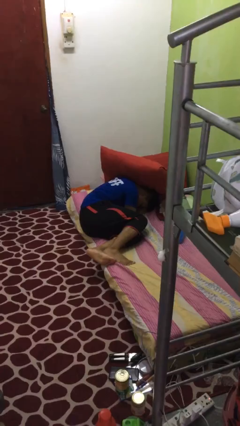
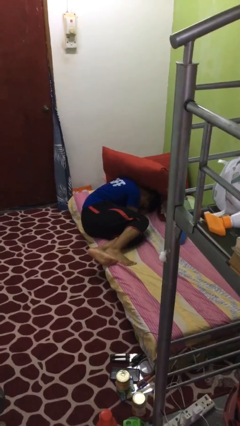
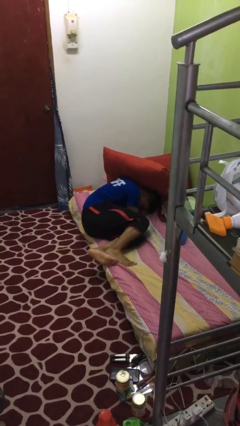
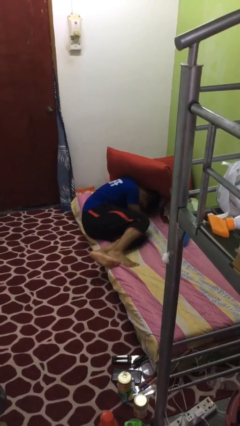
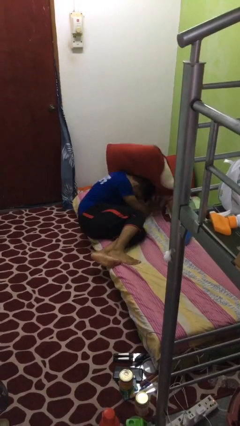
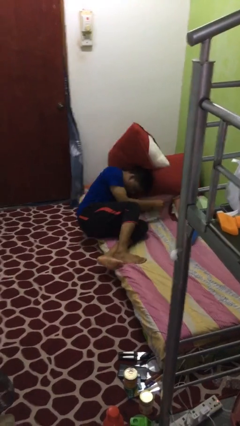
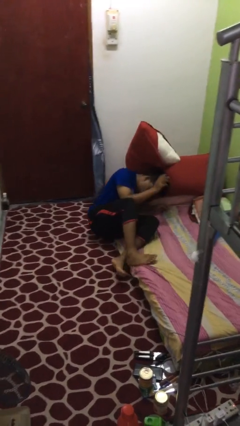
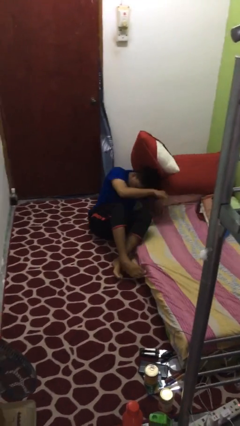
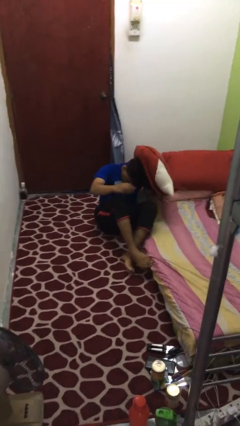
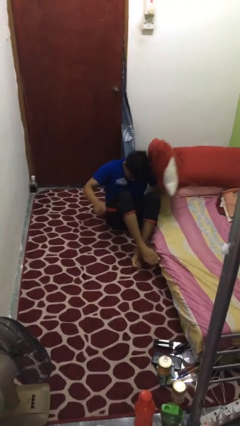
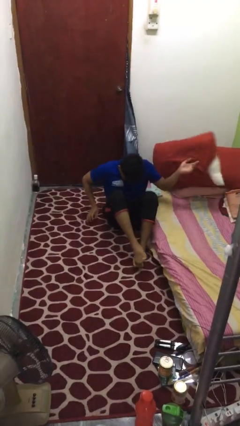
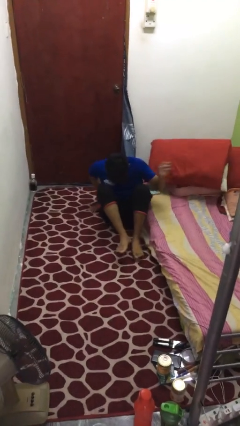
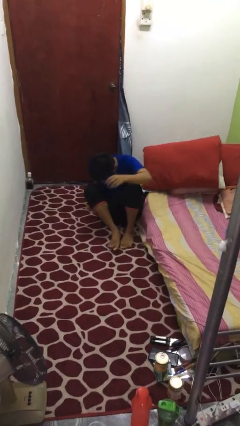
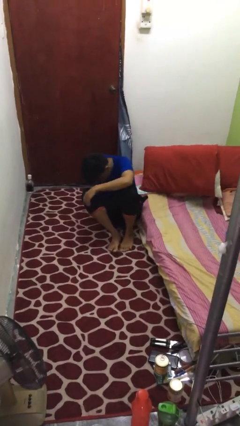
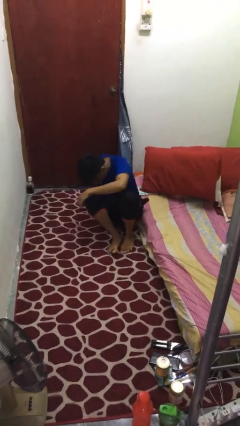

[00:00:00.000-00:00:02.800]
person falls from bed

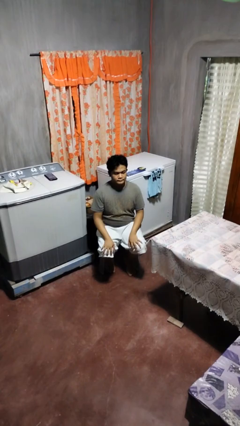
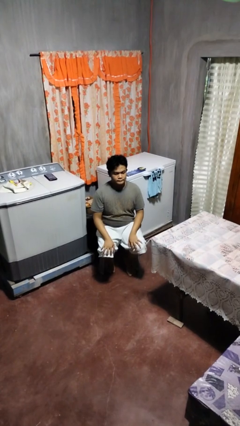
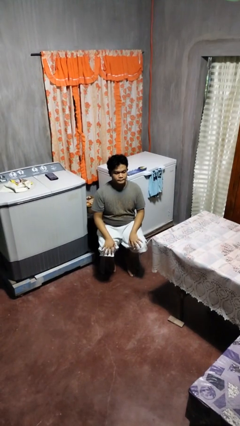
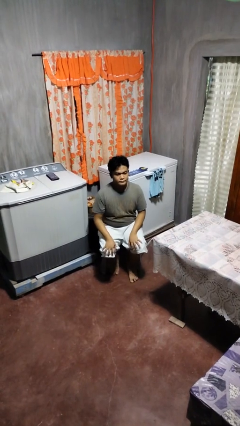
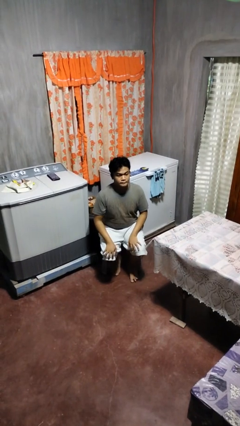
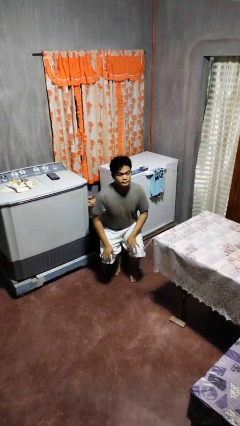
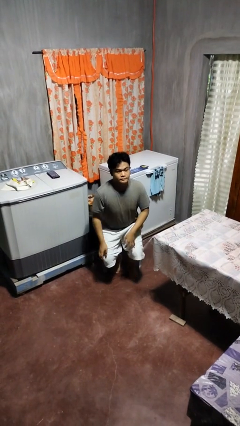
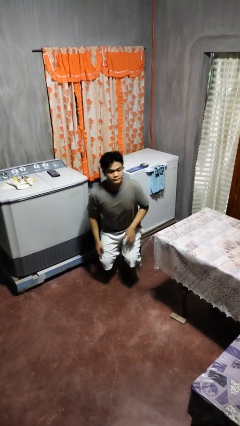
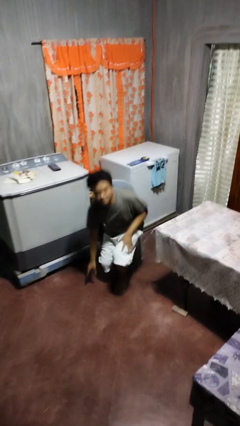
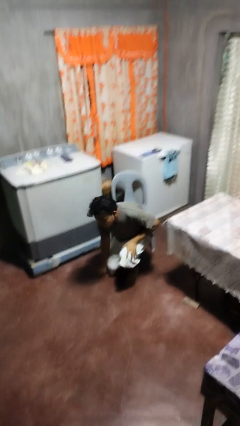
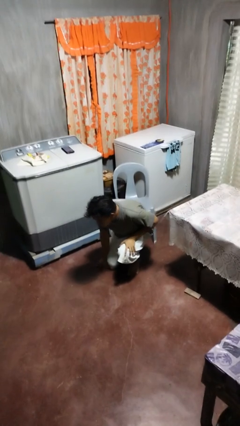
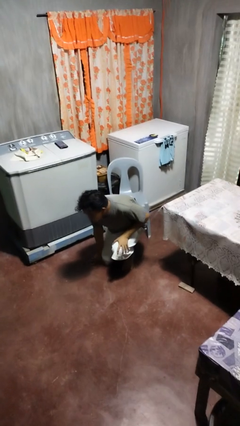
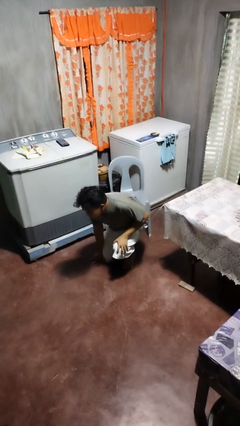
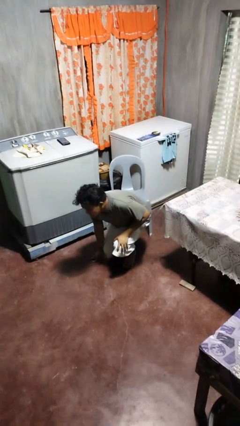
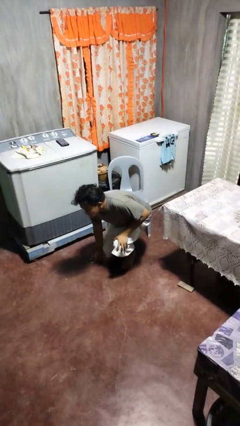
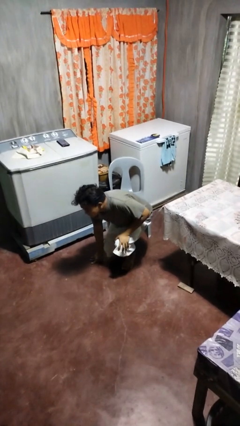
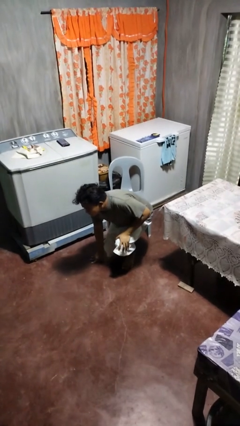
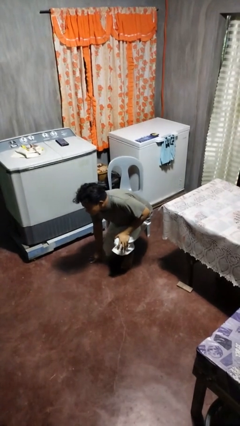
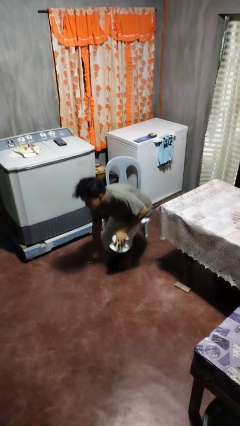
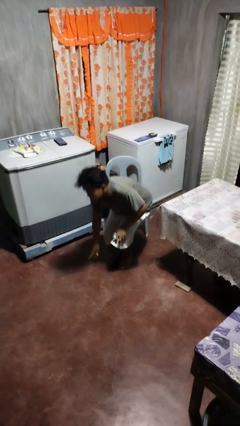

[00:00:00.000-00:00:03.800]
person falls from chair

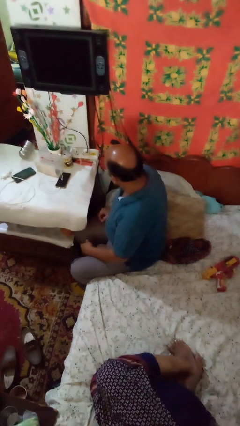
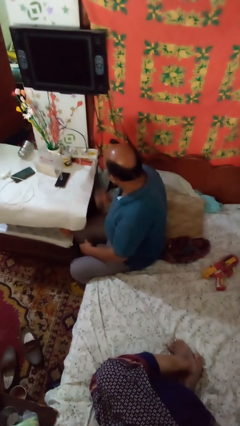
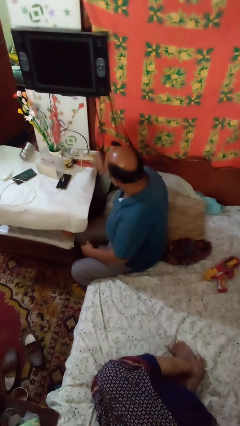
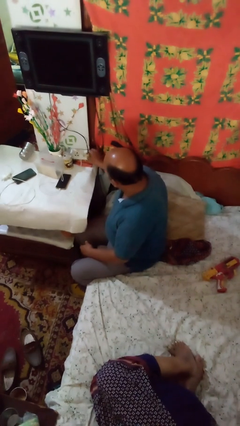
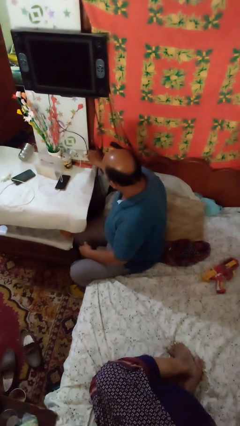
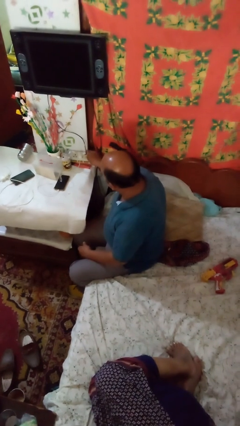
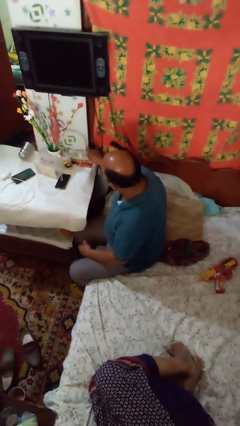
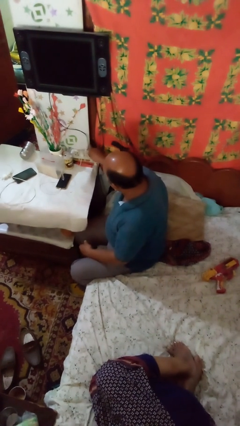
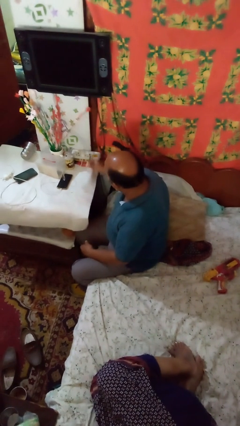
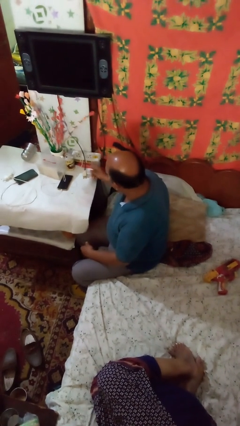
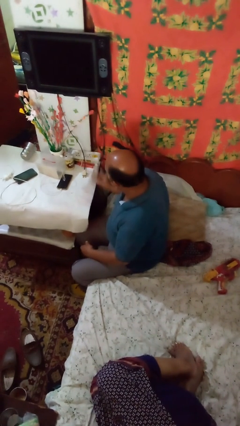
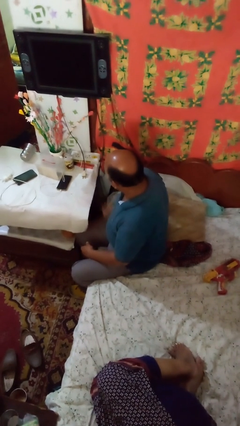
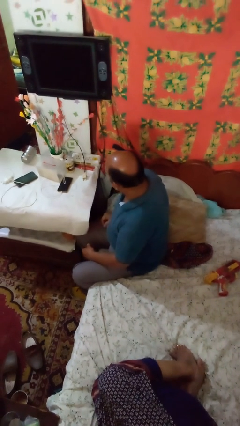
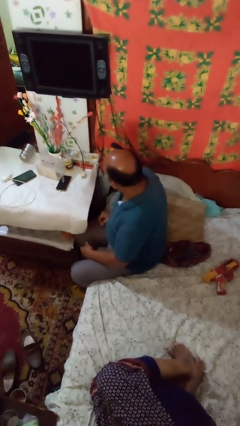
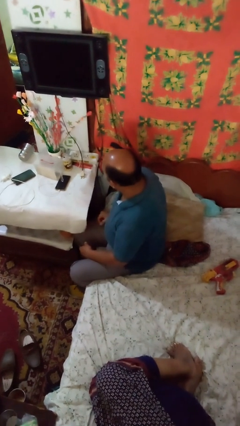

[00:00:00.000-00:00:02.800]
person unplugs from electrical socket

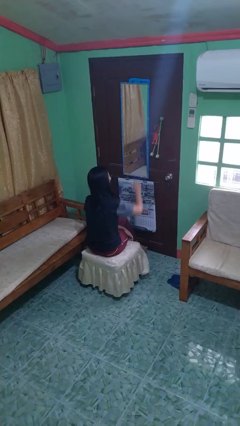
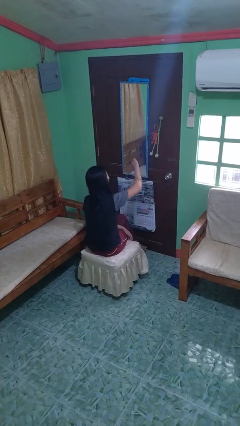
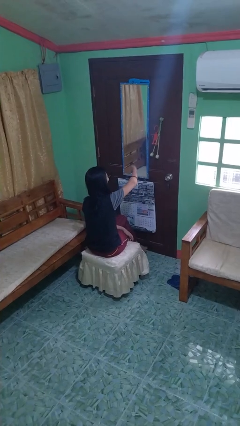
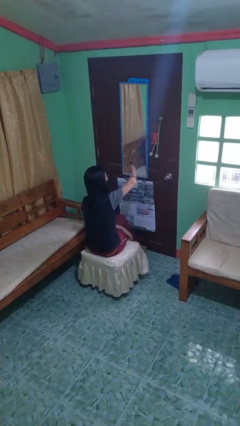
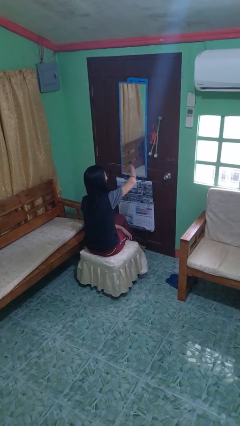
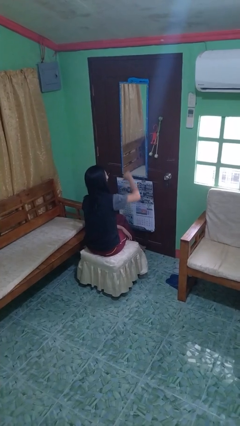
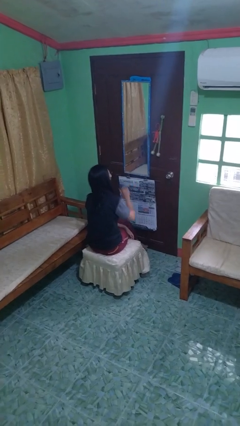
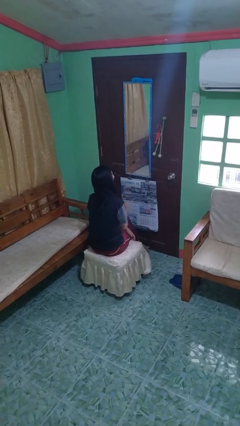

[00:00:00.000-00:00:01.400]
person gestures thumbs down

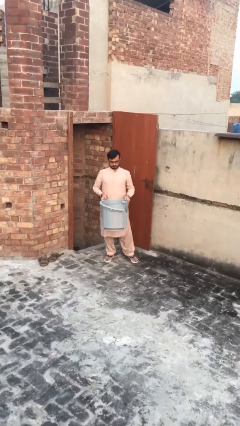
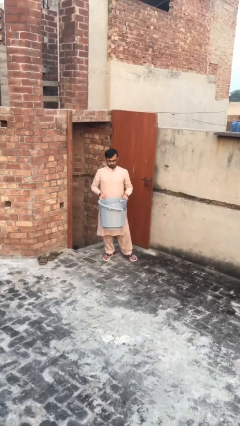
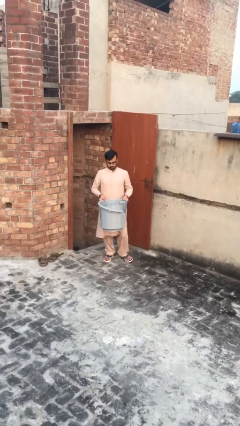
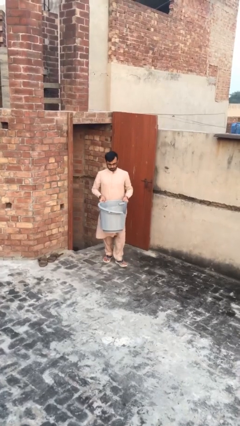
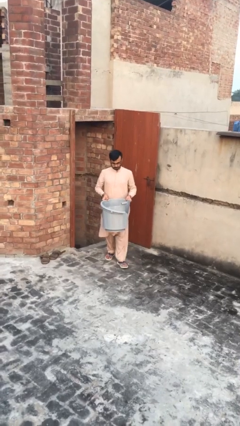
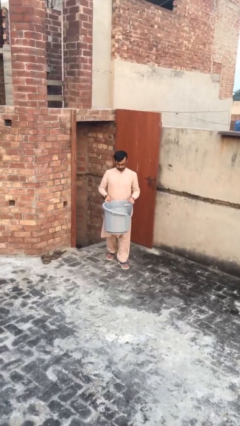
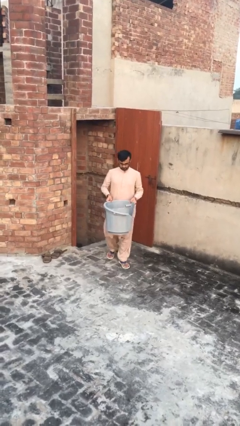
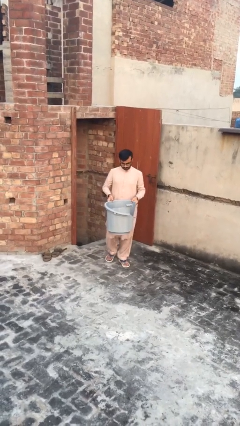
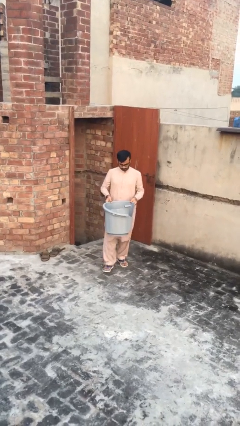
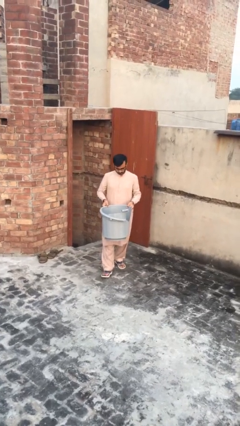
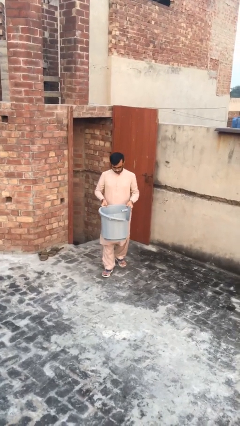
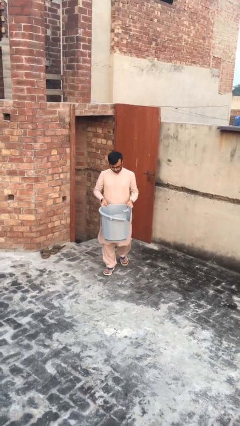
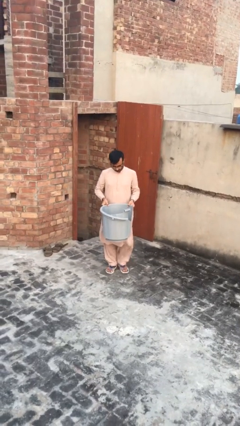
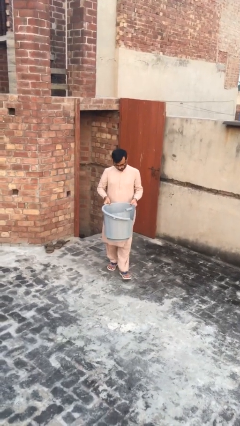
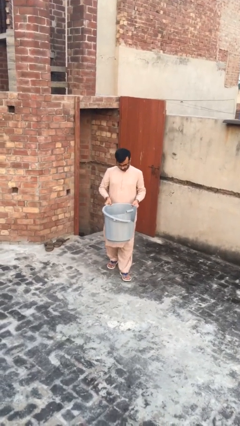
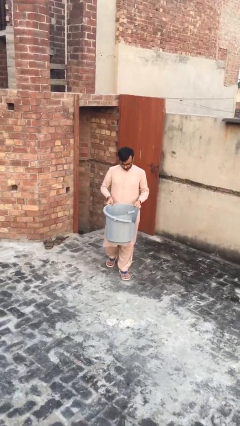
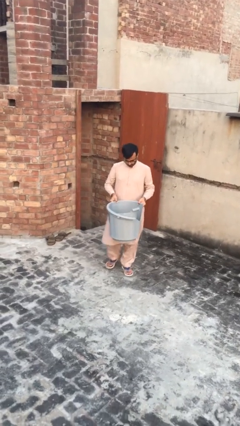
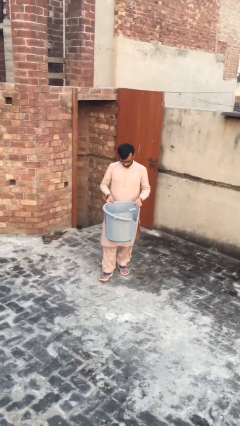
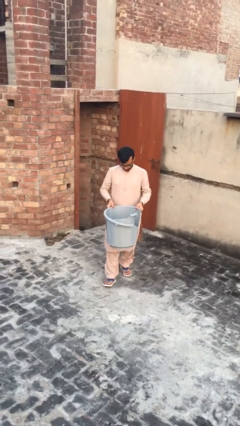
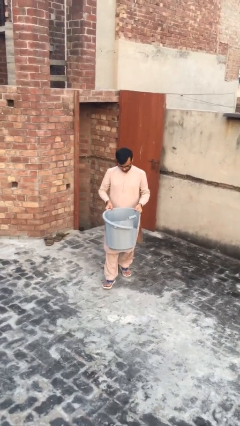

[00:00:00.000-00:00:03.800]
person carries heavy object

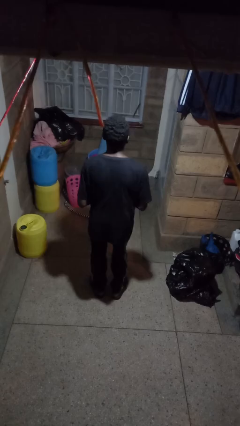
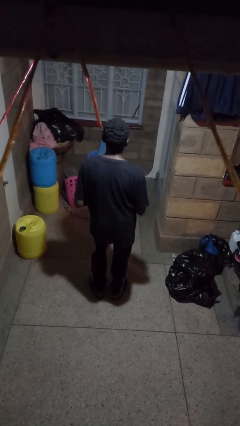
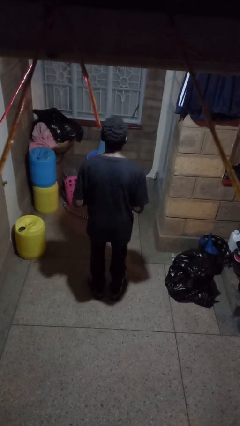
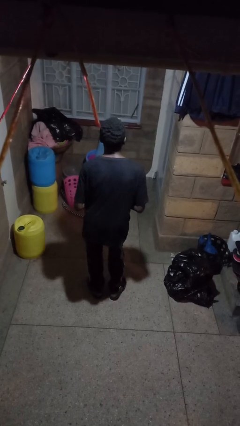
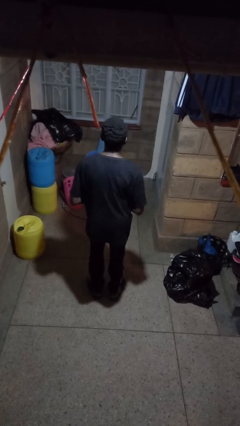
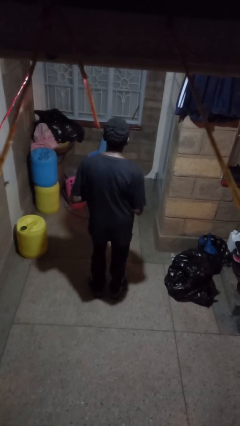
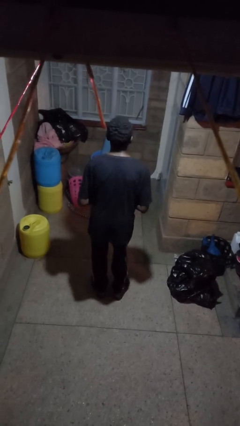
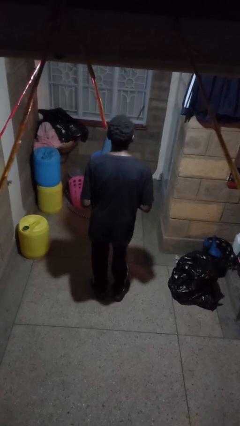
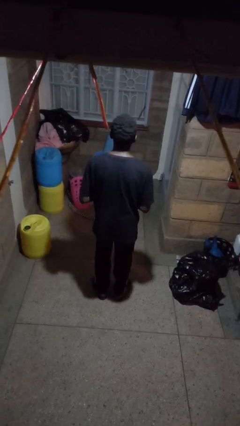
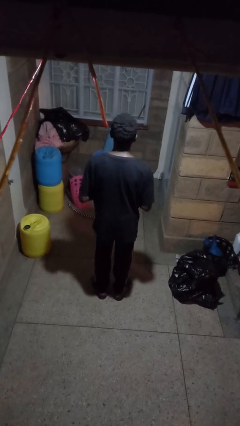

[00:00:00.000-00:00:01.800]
person wiggles hips

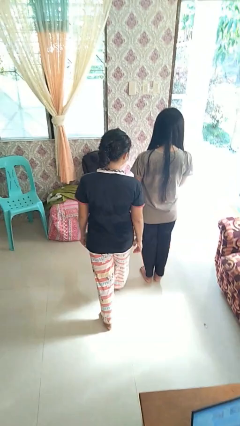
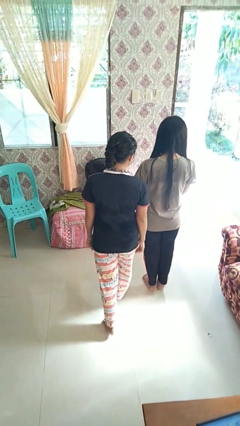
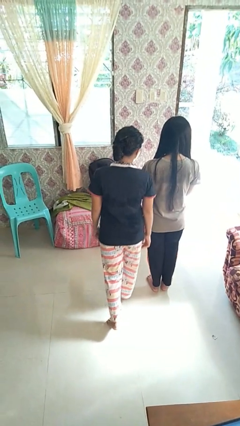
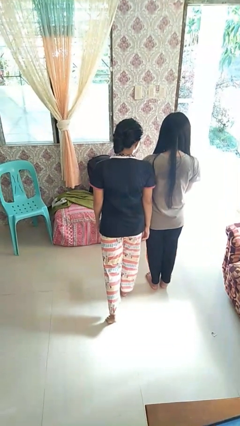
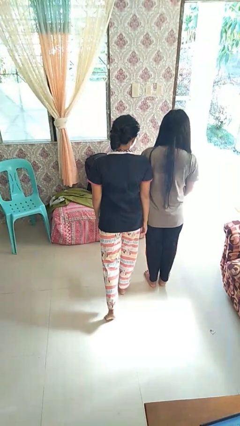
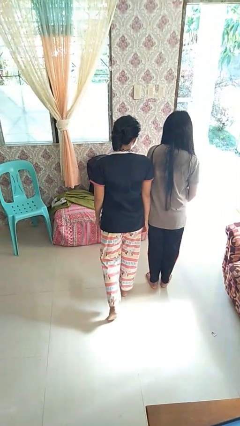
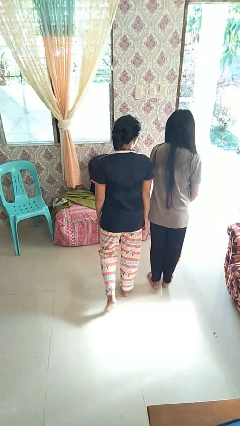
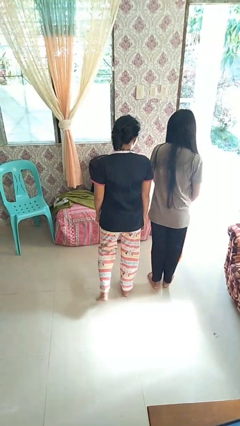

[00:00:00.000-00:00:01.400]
person bumps into person
